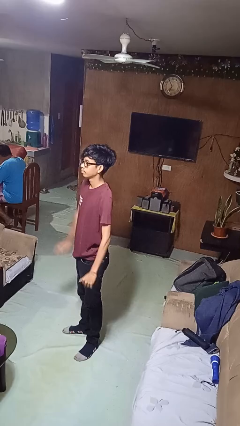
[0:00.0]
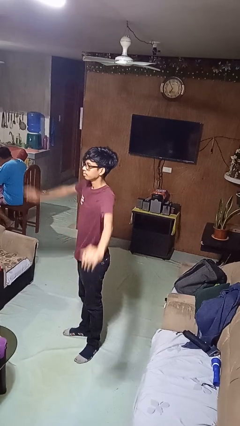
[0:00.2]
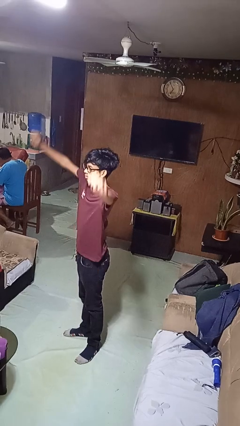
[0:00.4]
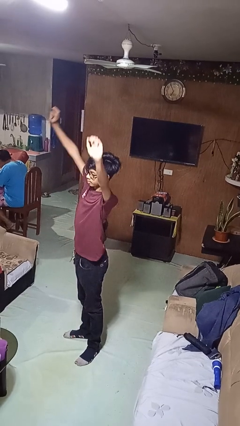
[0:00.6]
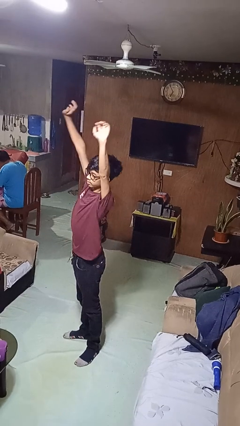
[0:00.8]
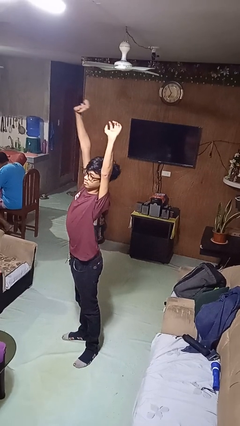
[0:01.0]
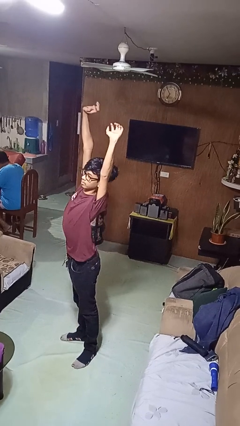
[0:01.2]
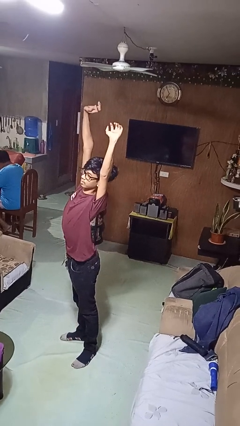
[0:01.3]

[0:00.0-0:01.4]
person stretches arms over head

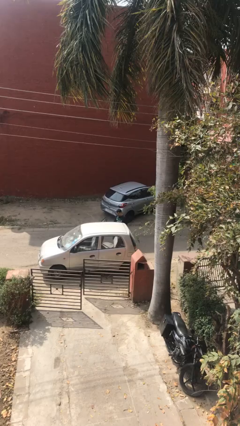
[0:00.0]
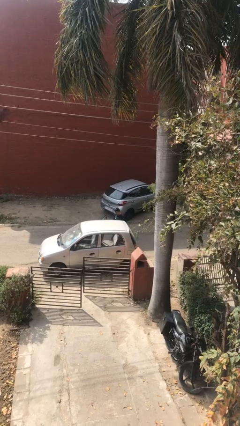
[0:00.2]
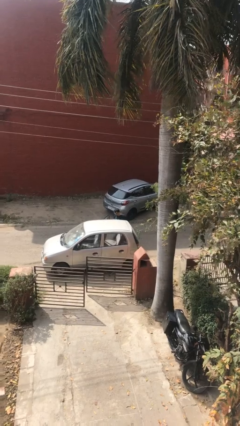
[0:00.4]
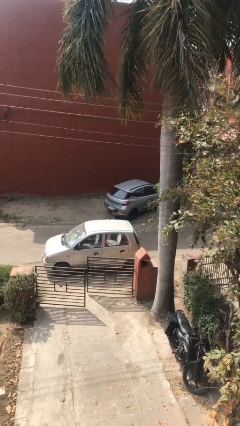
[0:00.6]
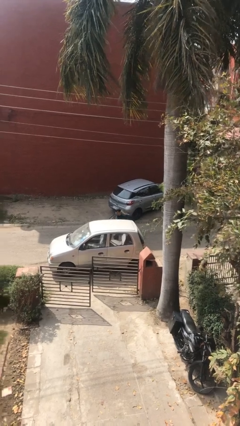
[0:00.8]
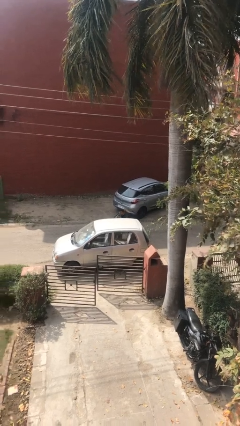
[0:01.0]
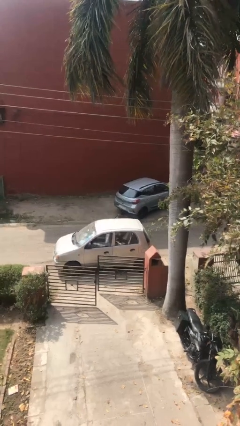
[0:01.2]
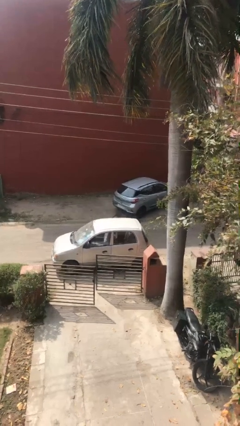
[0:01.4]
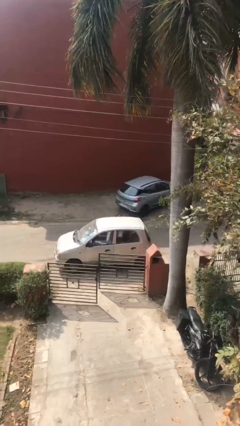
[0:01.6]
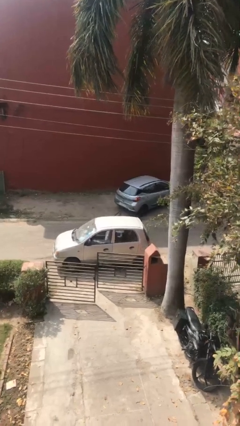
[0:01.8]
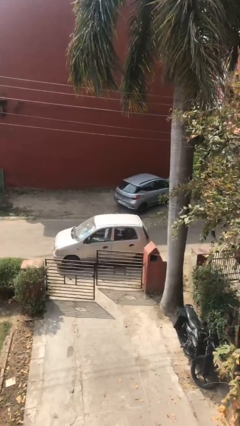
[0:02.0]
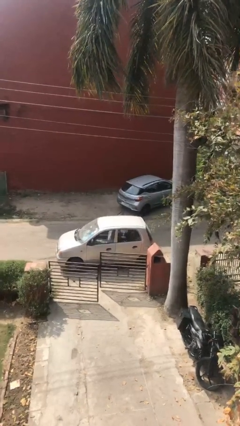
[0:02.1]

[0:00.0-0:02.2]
person enters car

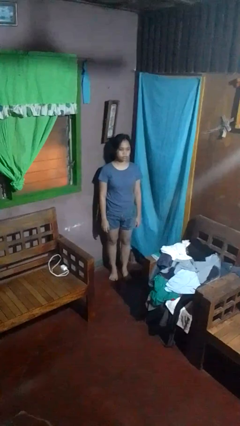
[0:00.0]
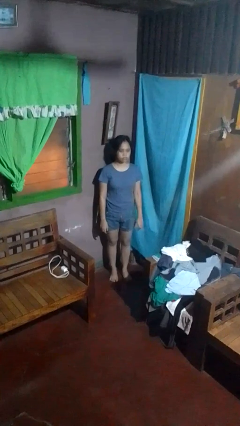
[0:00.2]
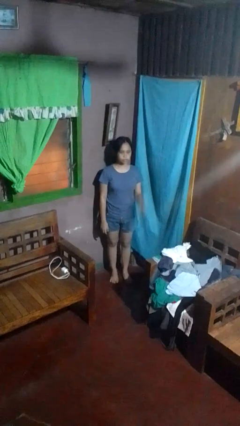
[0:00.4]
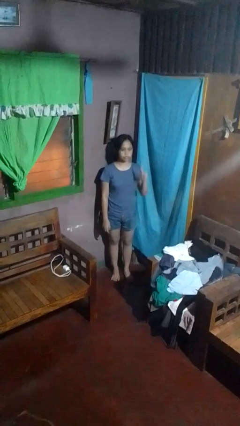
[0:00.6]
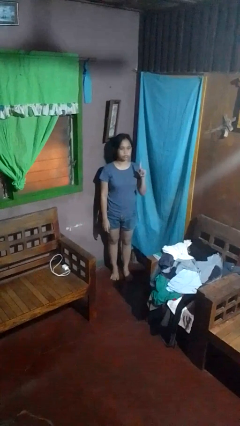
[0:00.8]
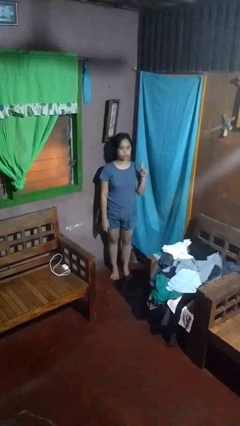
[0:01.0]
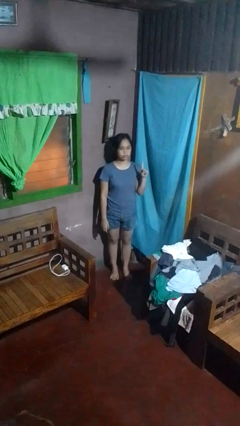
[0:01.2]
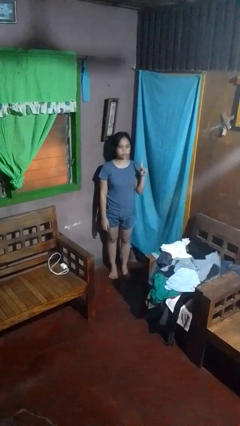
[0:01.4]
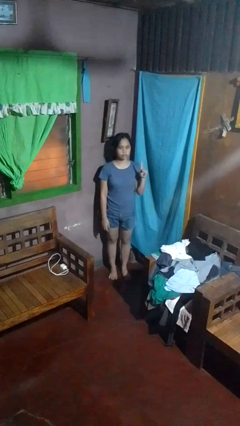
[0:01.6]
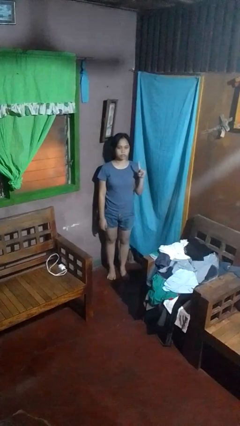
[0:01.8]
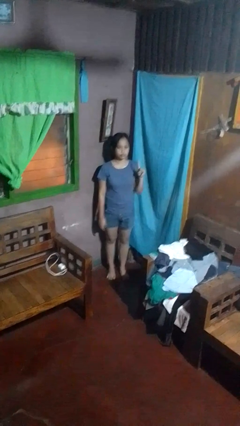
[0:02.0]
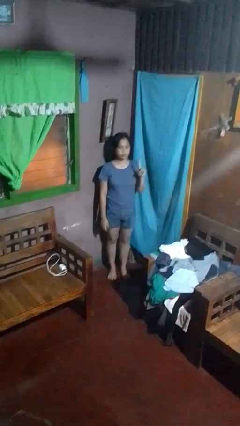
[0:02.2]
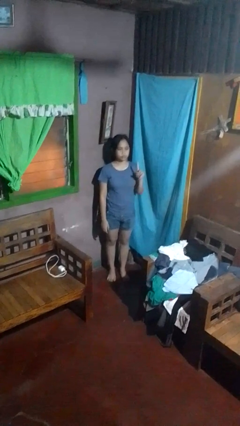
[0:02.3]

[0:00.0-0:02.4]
person gestures number one

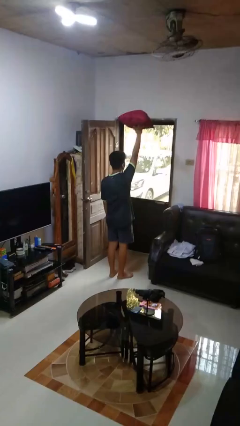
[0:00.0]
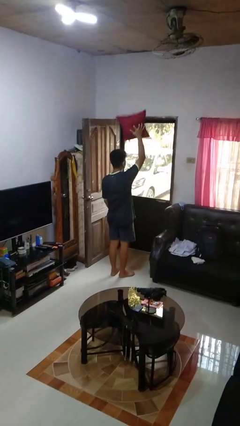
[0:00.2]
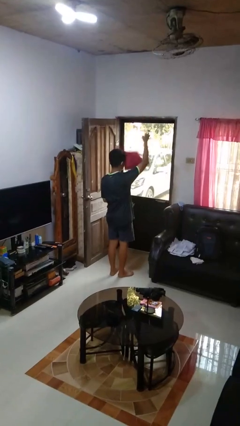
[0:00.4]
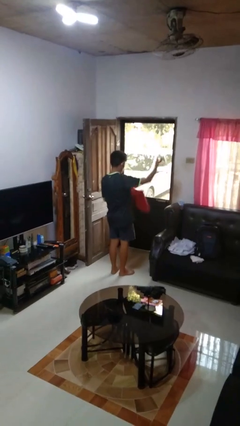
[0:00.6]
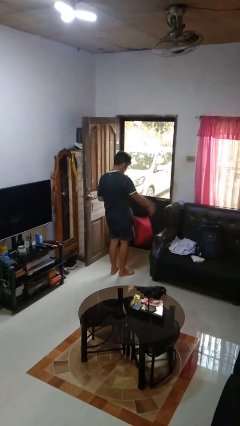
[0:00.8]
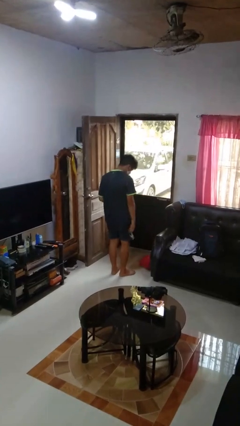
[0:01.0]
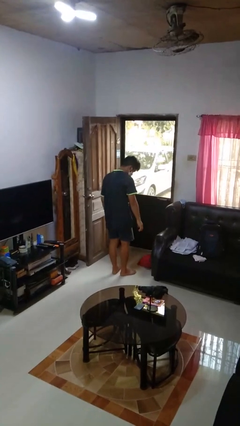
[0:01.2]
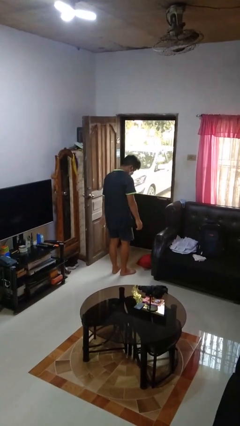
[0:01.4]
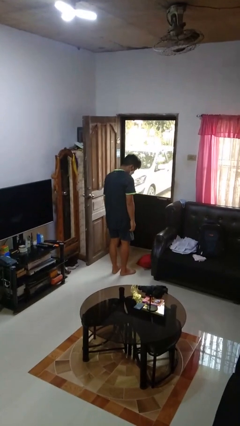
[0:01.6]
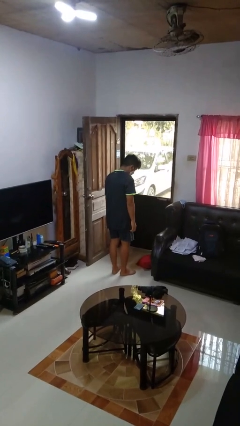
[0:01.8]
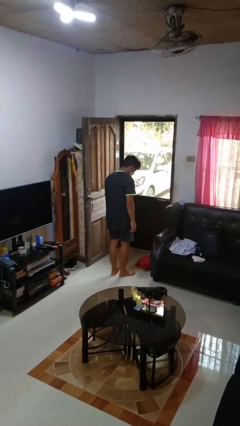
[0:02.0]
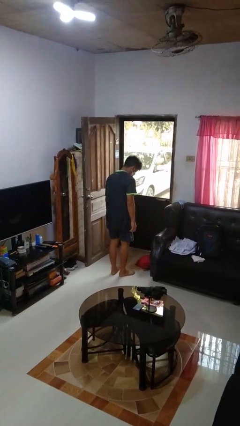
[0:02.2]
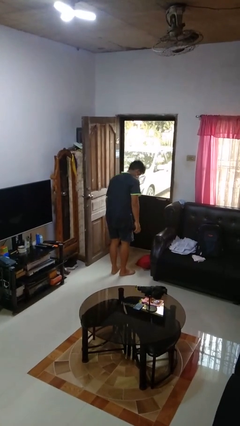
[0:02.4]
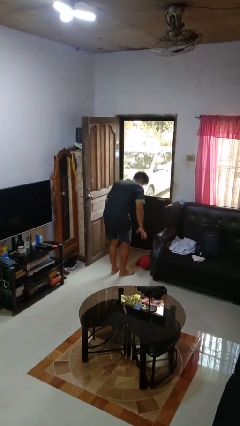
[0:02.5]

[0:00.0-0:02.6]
person drops object

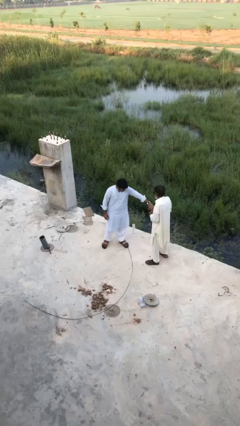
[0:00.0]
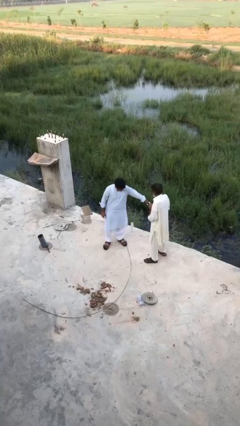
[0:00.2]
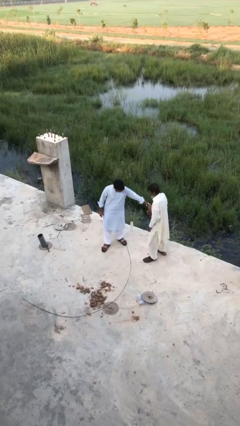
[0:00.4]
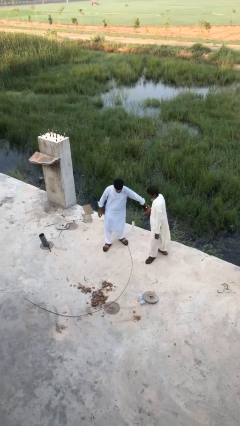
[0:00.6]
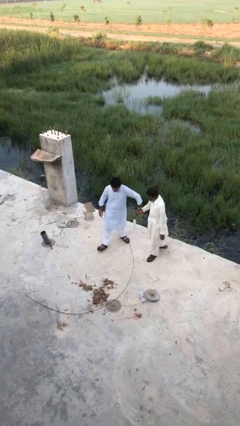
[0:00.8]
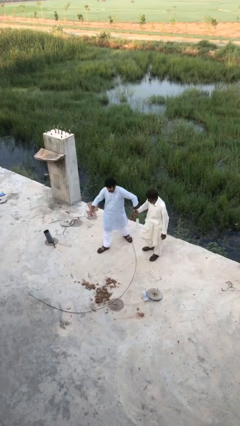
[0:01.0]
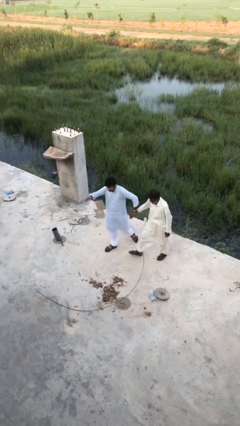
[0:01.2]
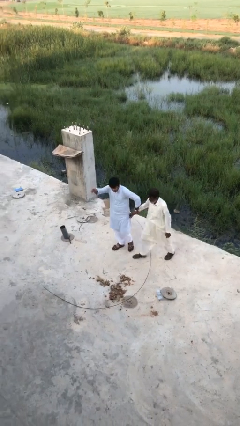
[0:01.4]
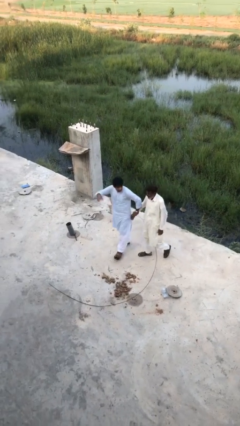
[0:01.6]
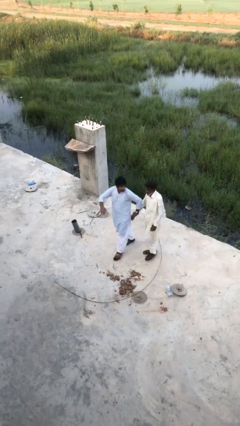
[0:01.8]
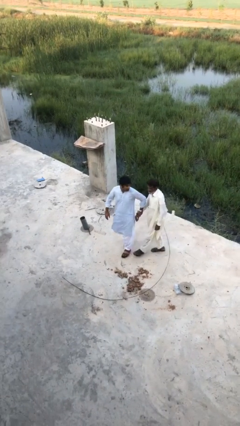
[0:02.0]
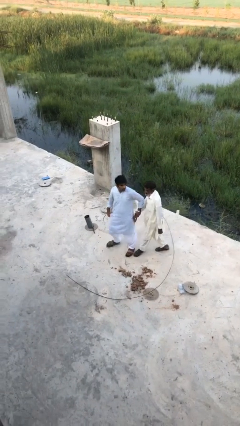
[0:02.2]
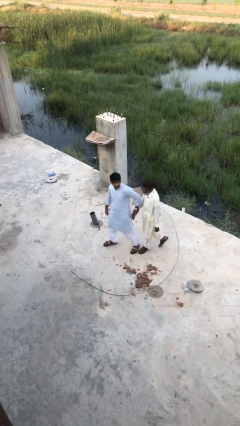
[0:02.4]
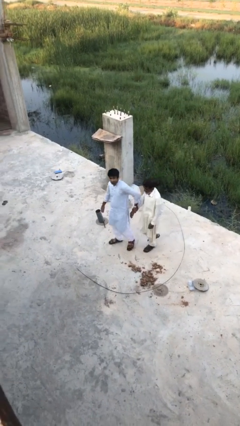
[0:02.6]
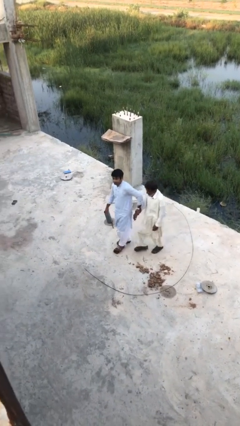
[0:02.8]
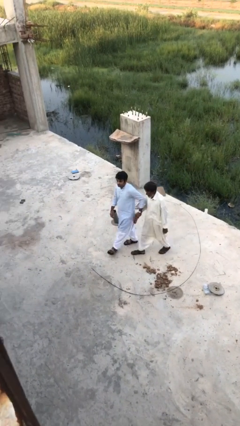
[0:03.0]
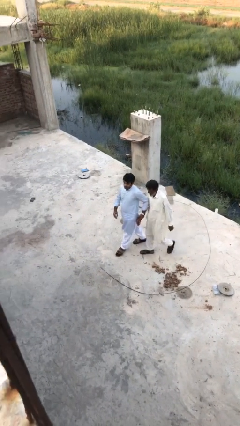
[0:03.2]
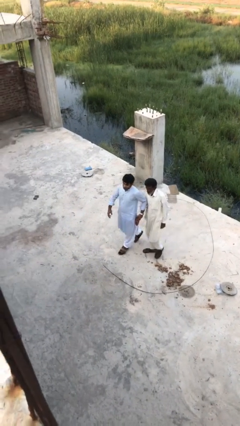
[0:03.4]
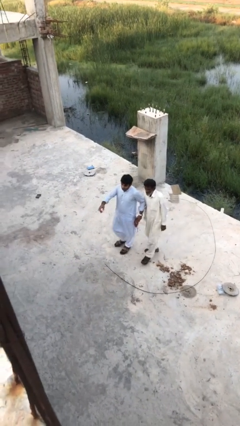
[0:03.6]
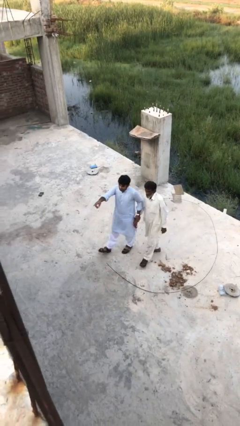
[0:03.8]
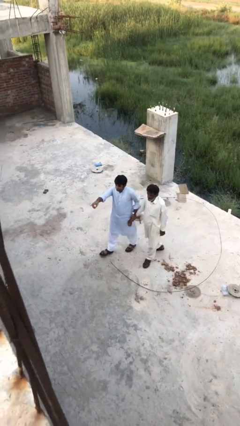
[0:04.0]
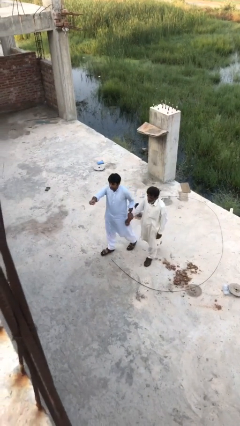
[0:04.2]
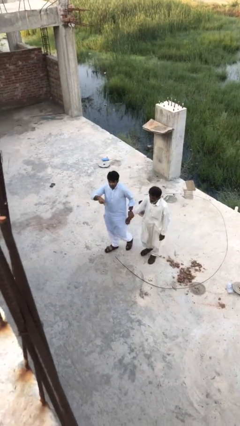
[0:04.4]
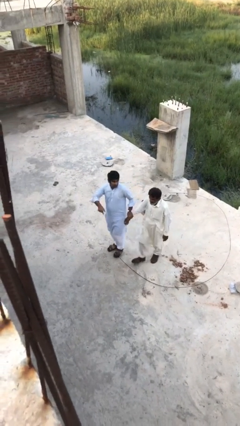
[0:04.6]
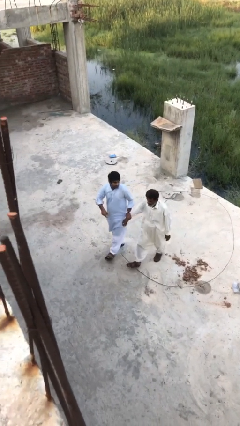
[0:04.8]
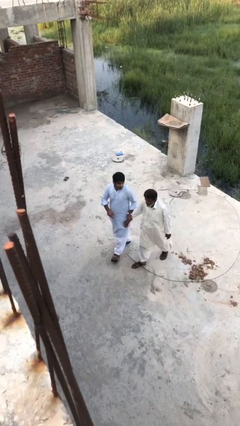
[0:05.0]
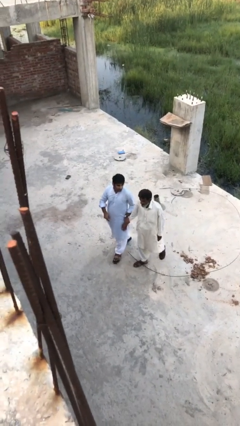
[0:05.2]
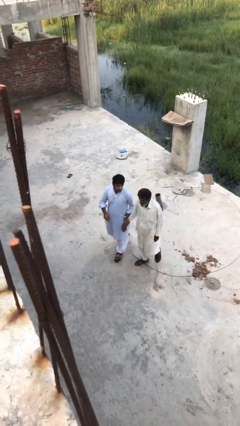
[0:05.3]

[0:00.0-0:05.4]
person holds hand

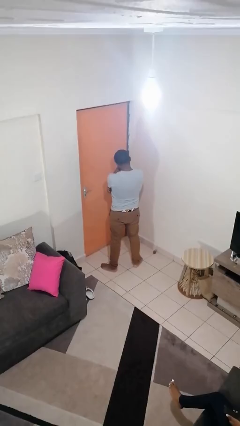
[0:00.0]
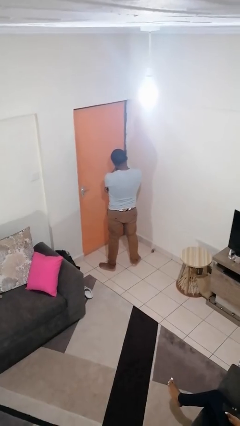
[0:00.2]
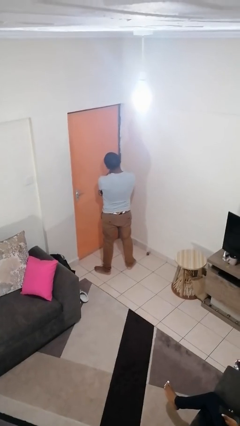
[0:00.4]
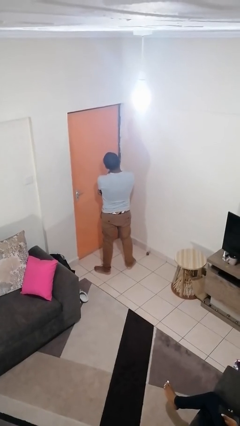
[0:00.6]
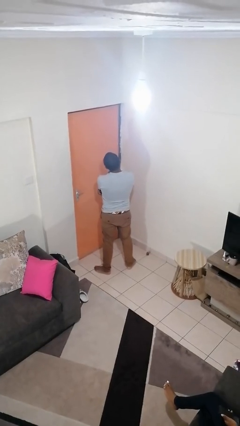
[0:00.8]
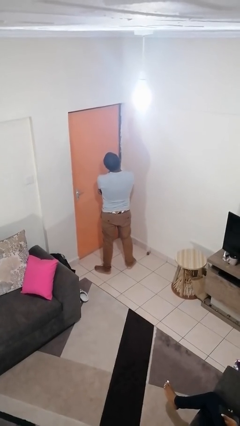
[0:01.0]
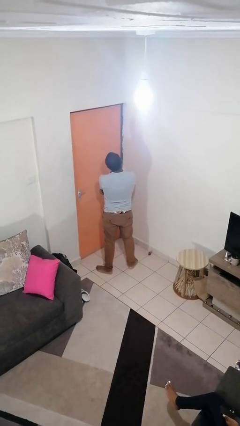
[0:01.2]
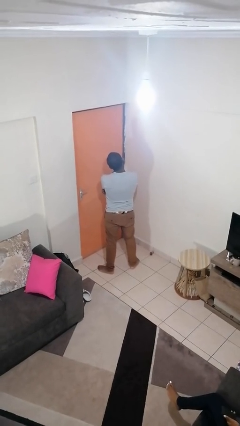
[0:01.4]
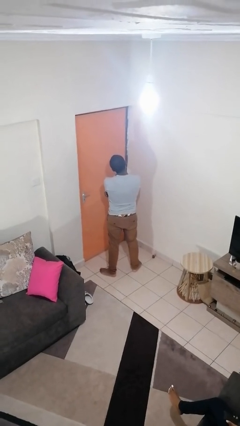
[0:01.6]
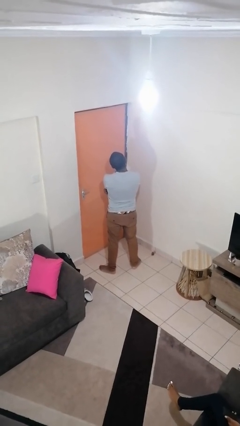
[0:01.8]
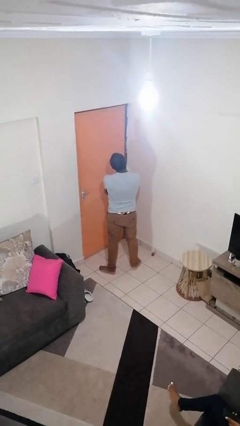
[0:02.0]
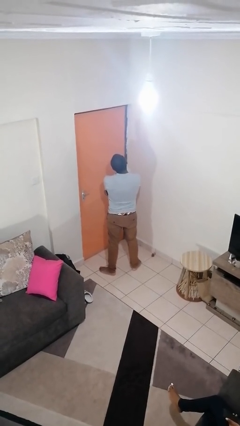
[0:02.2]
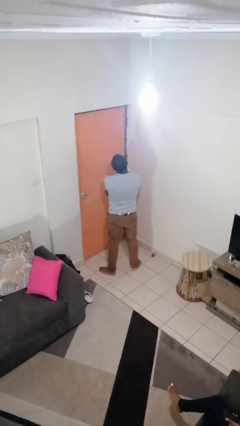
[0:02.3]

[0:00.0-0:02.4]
person strokes chin

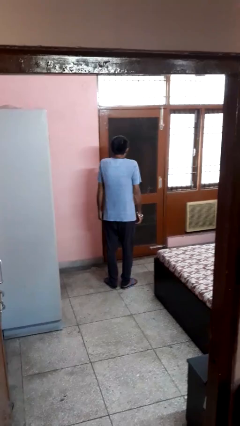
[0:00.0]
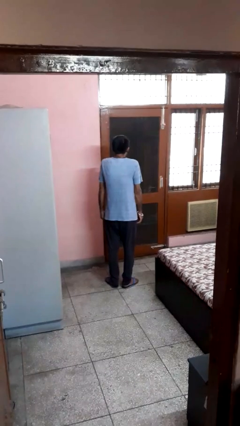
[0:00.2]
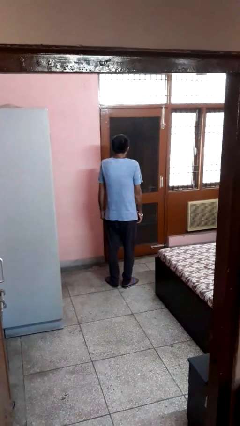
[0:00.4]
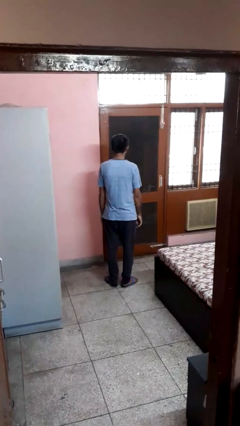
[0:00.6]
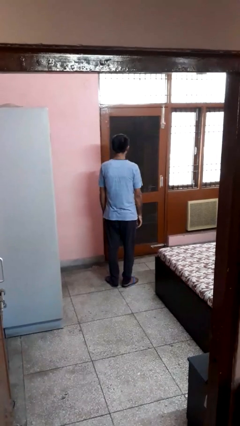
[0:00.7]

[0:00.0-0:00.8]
person shrugs
